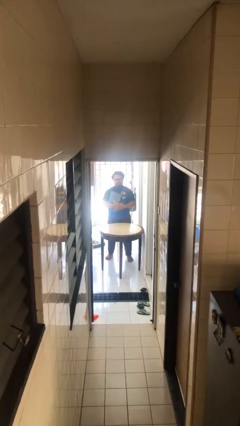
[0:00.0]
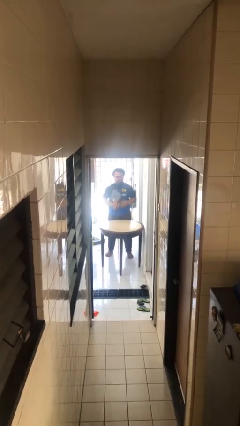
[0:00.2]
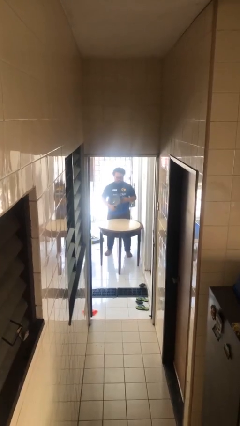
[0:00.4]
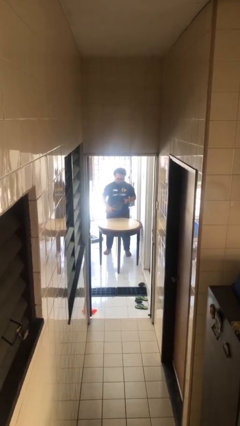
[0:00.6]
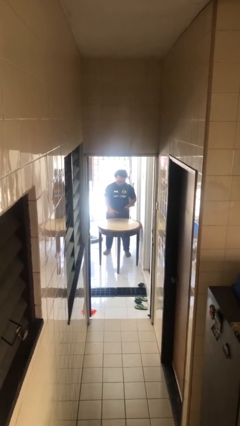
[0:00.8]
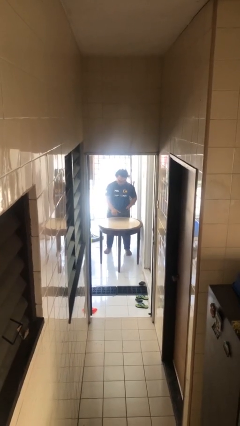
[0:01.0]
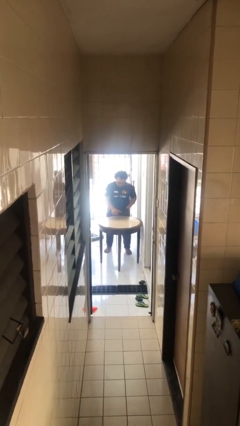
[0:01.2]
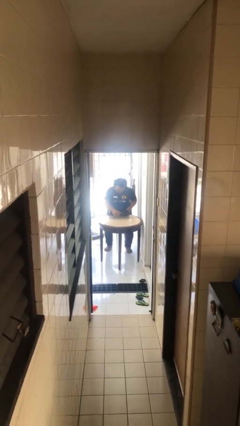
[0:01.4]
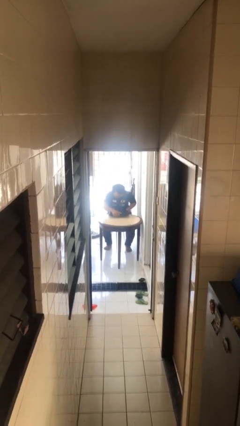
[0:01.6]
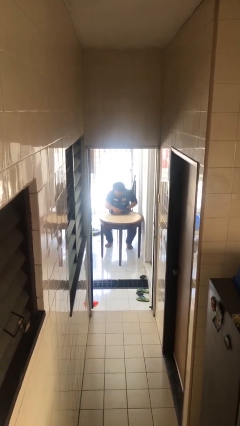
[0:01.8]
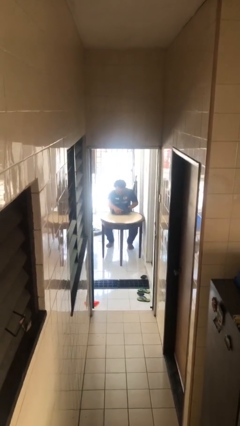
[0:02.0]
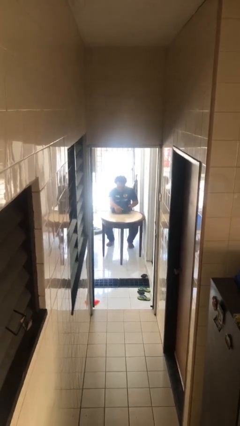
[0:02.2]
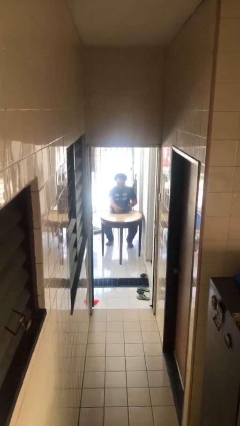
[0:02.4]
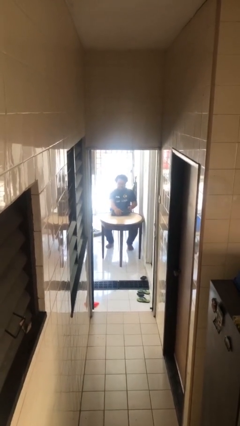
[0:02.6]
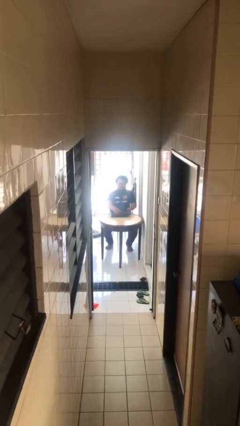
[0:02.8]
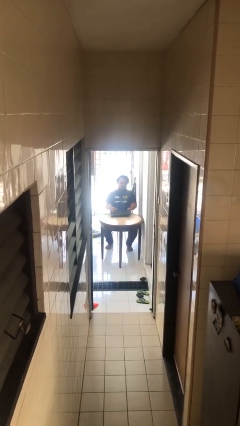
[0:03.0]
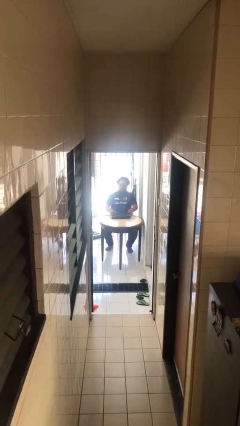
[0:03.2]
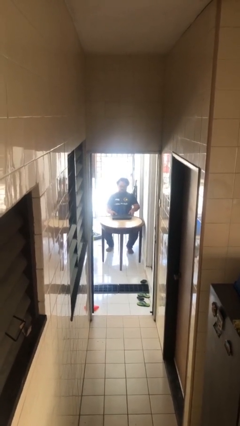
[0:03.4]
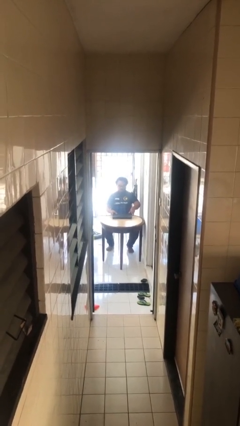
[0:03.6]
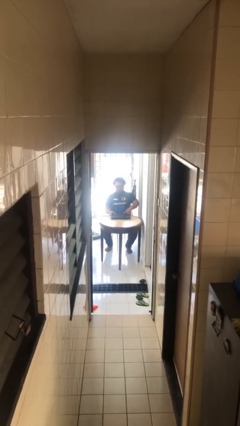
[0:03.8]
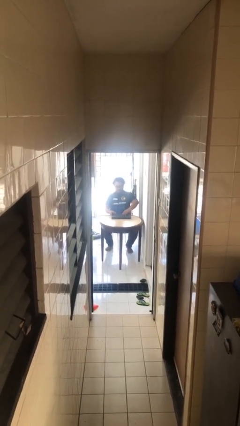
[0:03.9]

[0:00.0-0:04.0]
person sits down

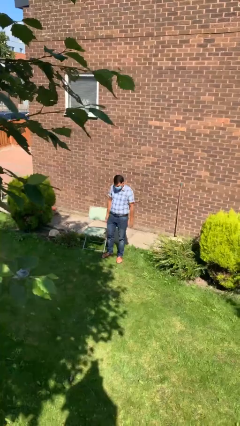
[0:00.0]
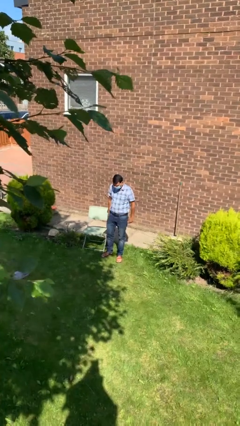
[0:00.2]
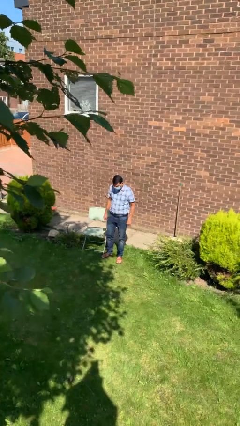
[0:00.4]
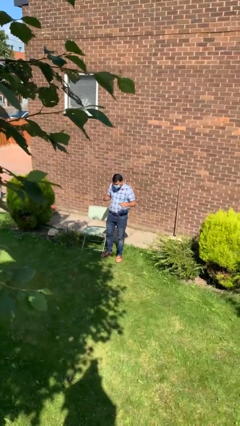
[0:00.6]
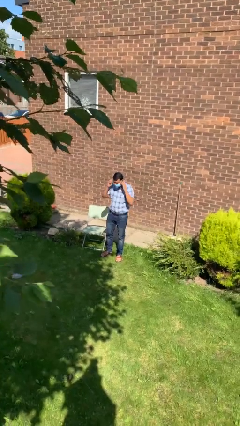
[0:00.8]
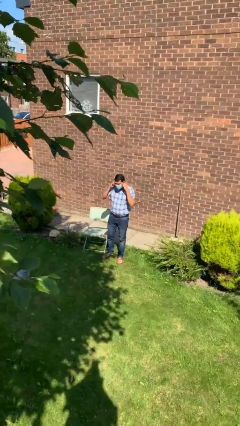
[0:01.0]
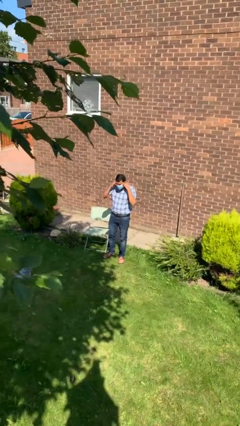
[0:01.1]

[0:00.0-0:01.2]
person takes off facemask

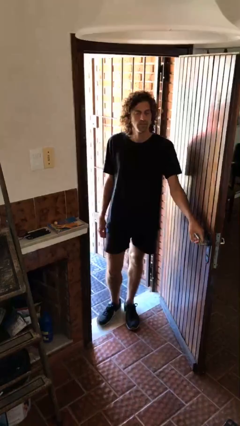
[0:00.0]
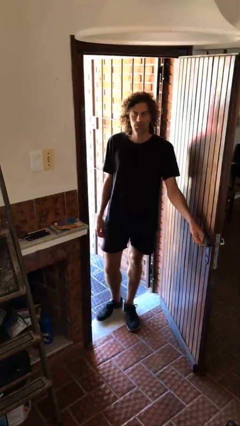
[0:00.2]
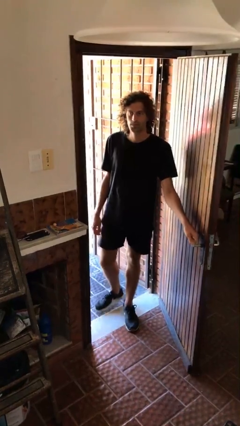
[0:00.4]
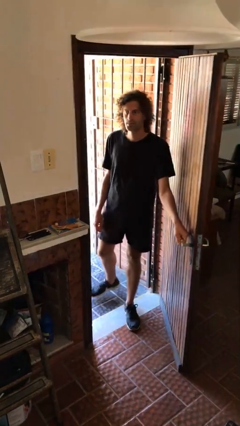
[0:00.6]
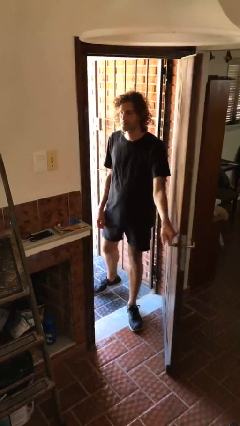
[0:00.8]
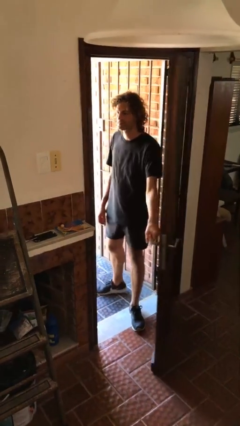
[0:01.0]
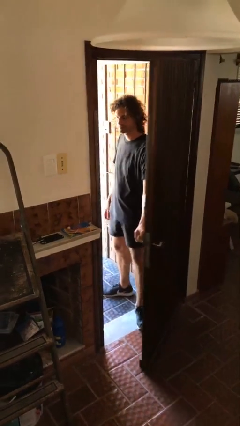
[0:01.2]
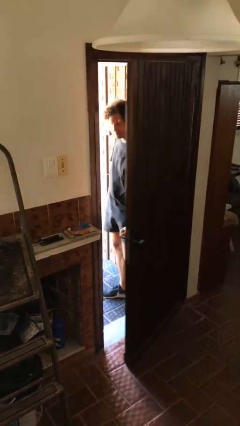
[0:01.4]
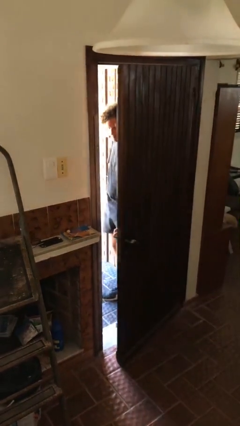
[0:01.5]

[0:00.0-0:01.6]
person closes facility door

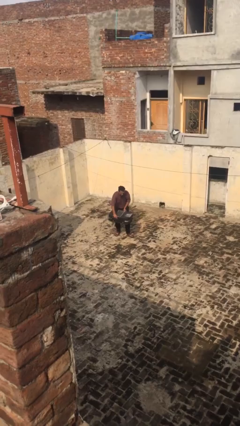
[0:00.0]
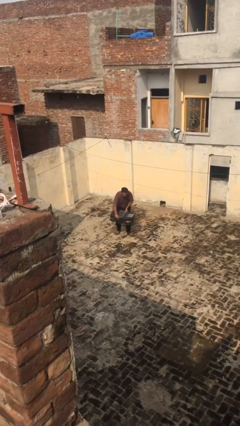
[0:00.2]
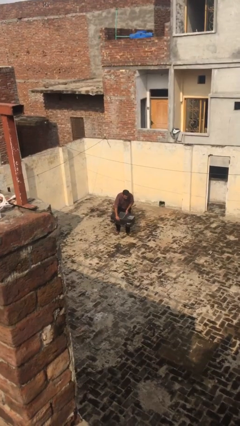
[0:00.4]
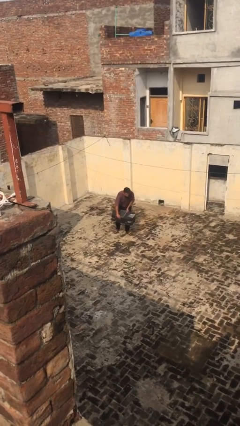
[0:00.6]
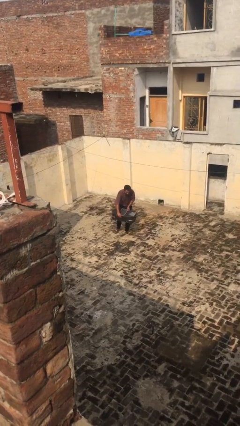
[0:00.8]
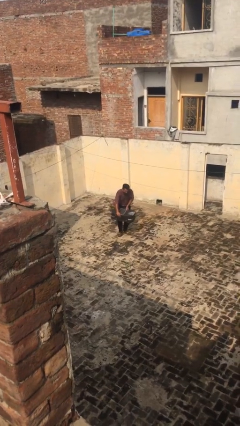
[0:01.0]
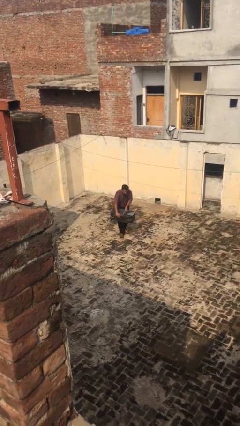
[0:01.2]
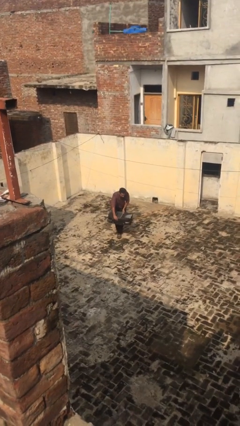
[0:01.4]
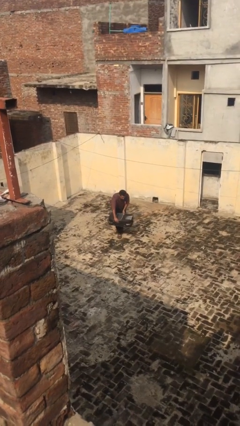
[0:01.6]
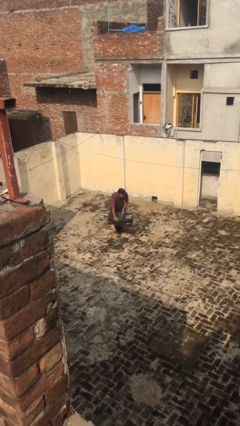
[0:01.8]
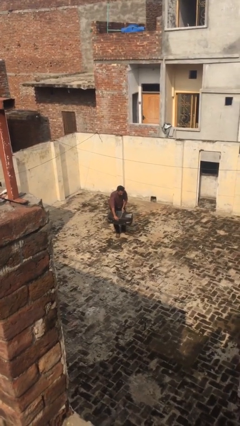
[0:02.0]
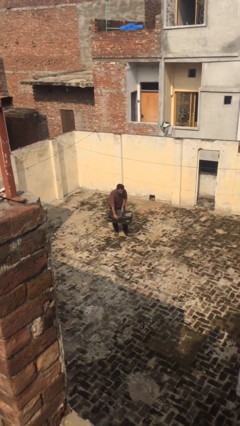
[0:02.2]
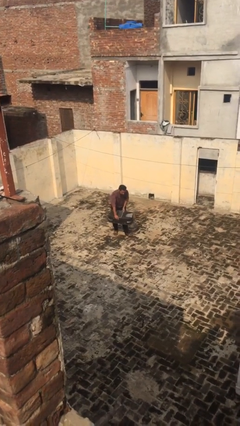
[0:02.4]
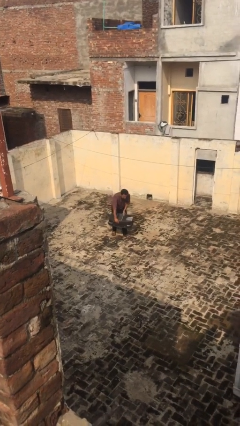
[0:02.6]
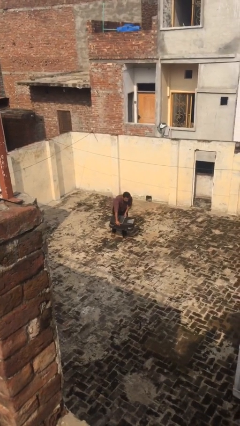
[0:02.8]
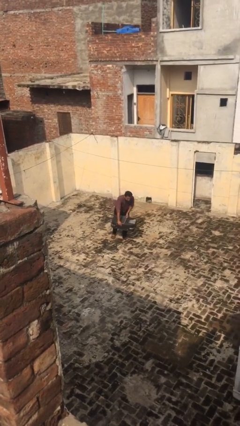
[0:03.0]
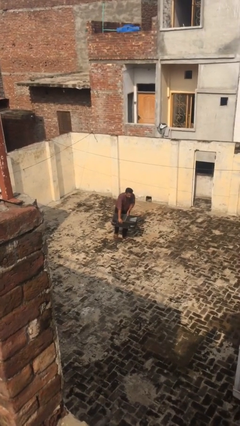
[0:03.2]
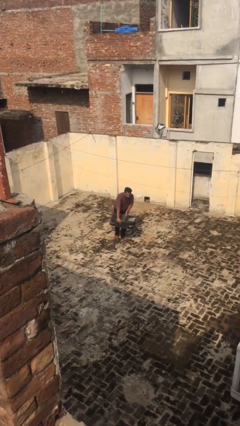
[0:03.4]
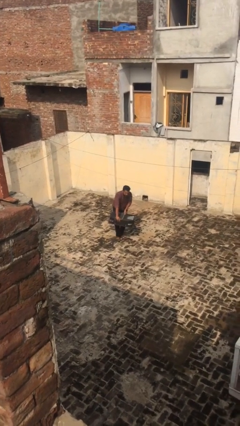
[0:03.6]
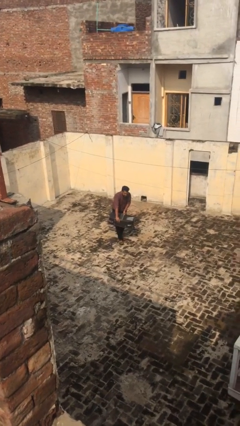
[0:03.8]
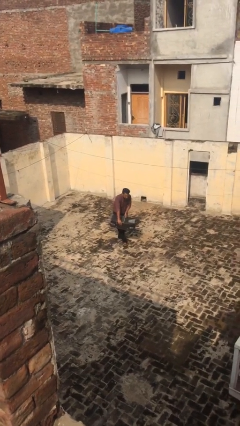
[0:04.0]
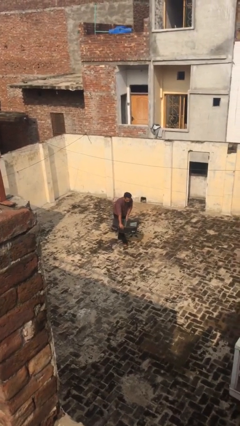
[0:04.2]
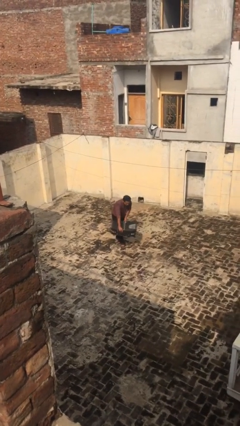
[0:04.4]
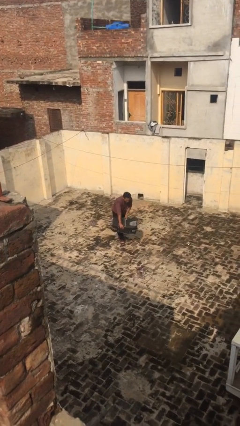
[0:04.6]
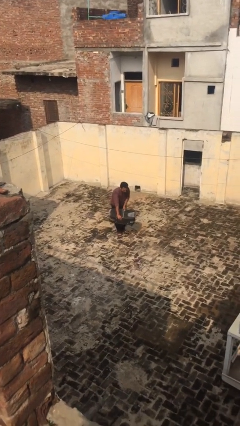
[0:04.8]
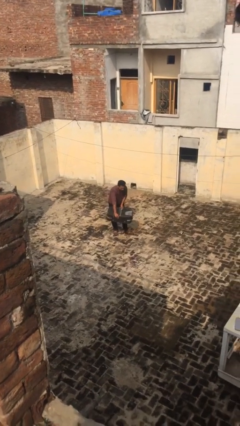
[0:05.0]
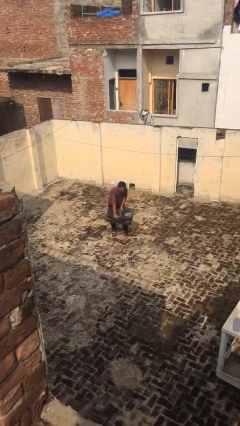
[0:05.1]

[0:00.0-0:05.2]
person carries heavy object

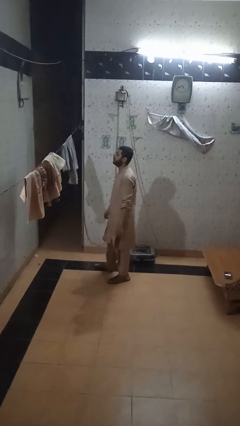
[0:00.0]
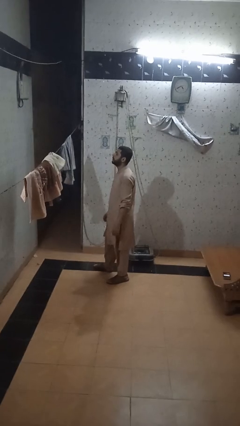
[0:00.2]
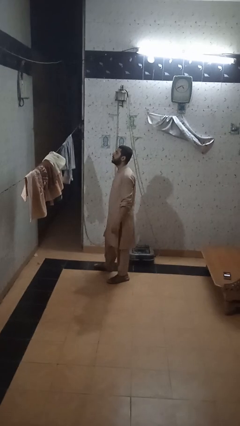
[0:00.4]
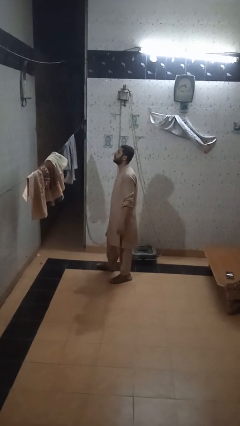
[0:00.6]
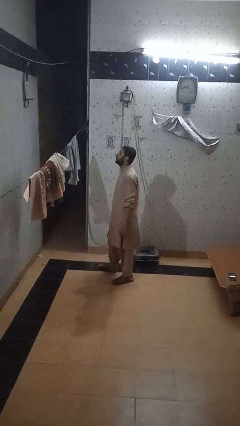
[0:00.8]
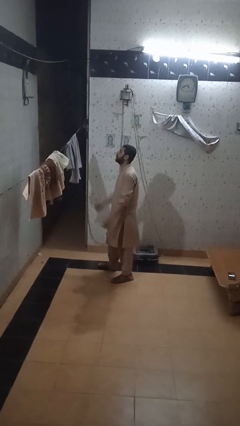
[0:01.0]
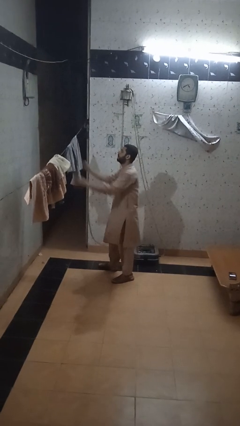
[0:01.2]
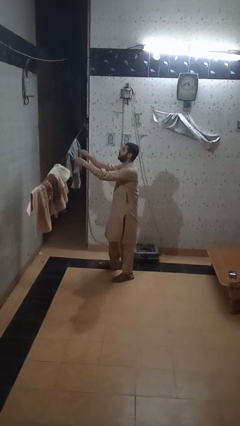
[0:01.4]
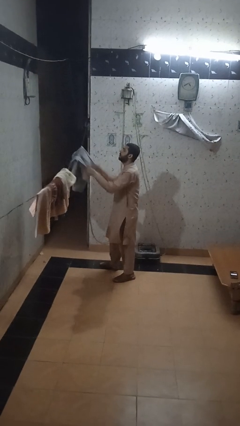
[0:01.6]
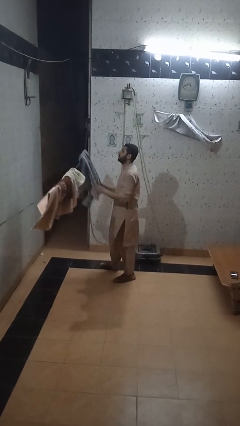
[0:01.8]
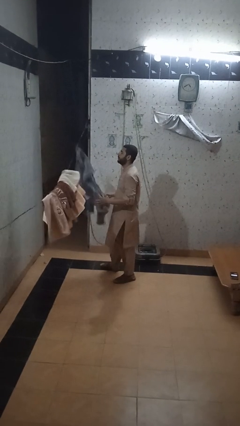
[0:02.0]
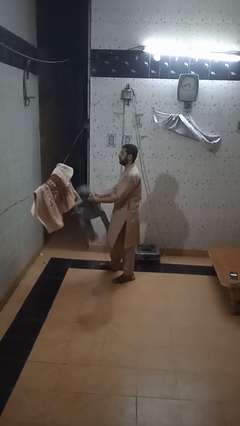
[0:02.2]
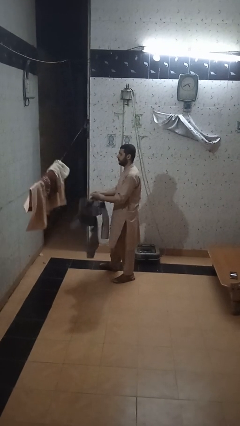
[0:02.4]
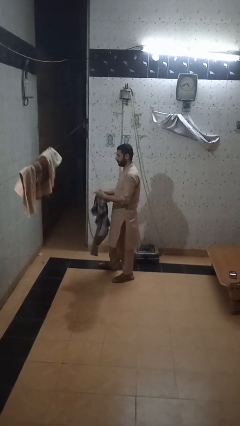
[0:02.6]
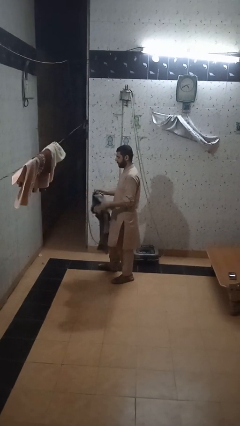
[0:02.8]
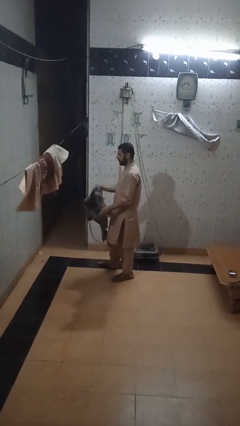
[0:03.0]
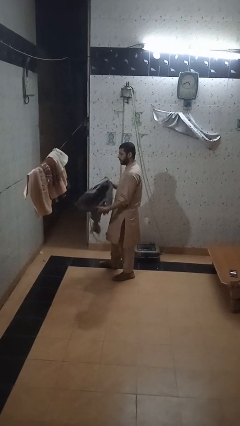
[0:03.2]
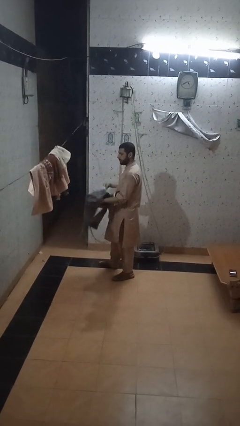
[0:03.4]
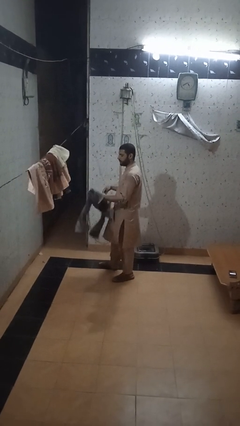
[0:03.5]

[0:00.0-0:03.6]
person takes clothes from closet

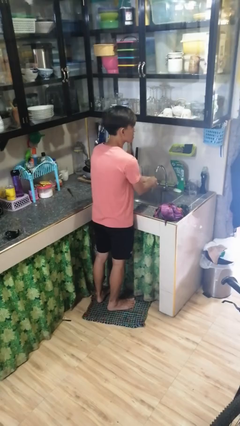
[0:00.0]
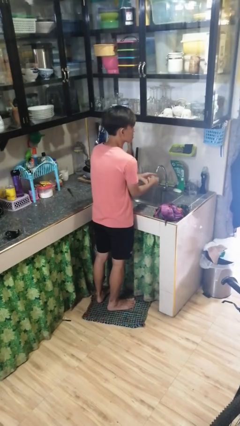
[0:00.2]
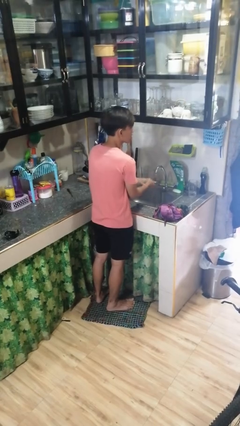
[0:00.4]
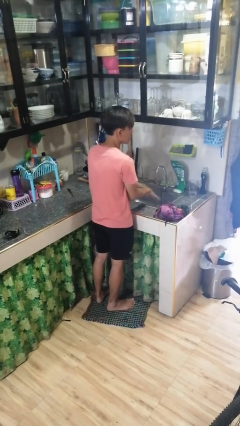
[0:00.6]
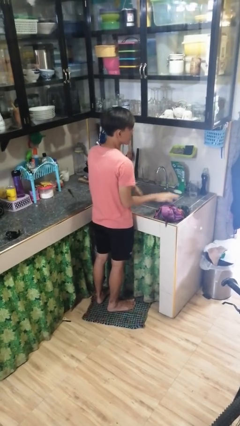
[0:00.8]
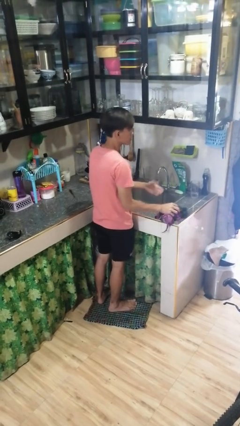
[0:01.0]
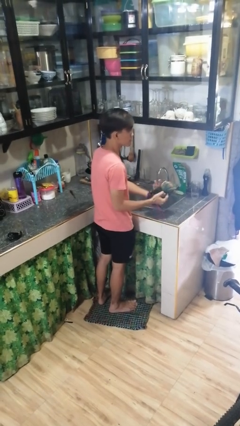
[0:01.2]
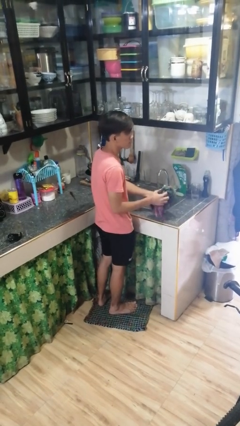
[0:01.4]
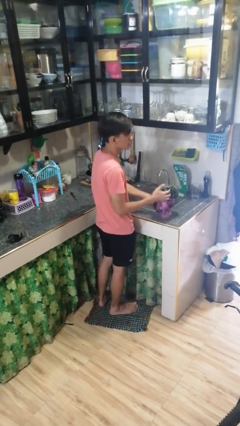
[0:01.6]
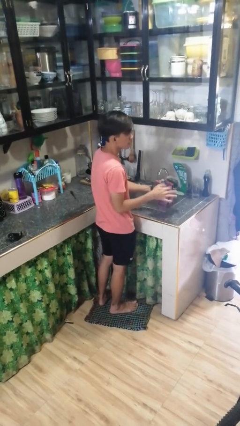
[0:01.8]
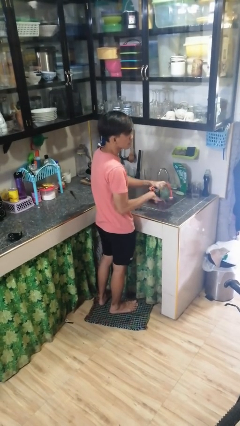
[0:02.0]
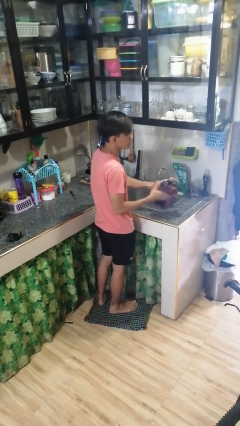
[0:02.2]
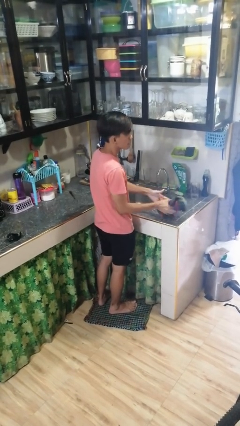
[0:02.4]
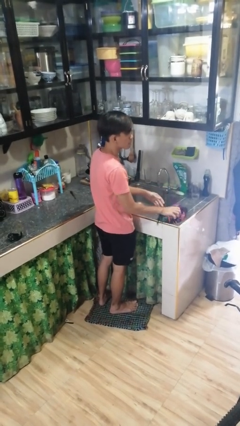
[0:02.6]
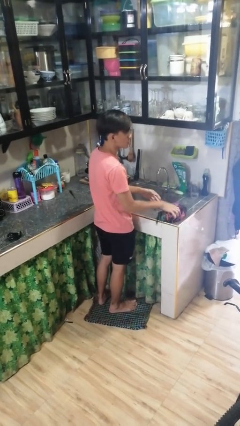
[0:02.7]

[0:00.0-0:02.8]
person dries hands with towel
